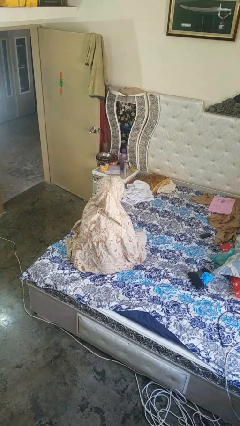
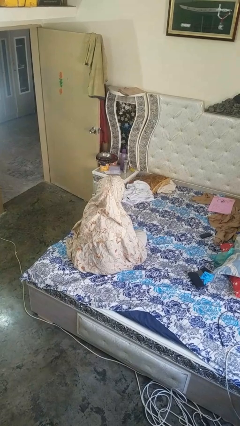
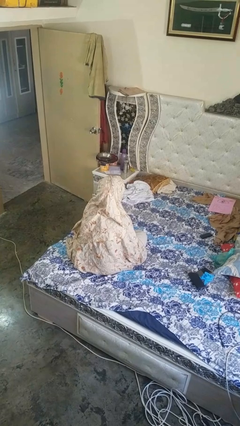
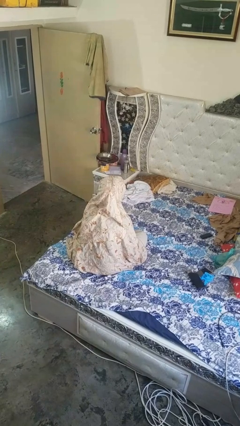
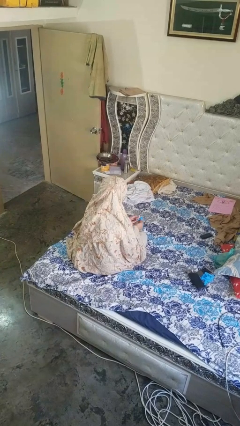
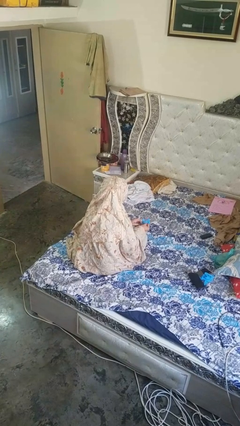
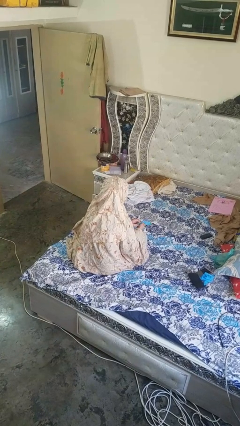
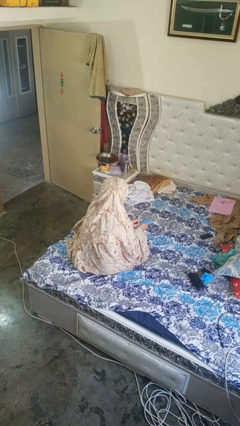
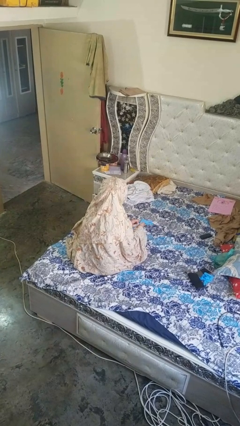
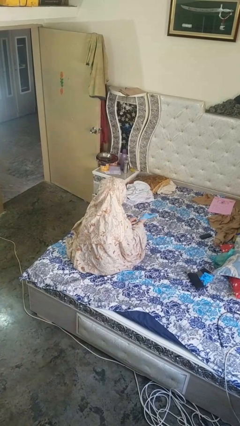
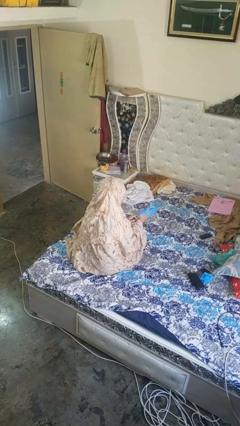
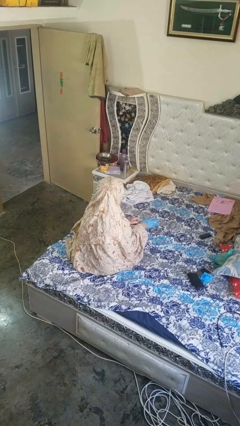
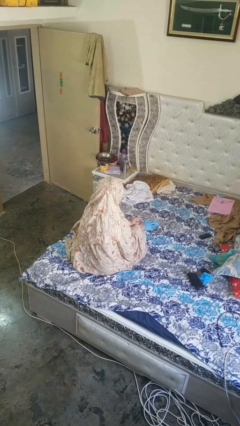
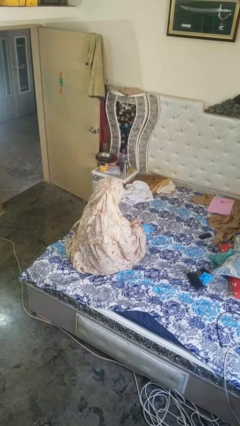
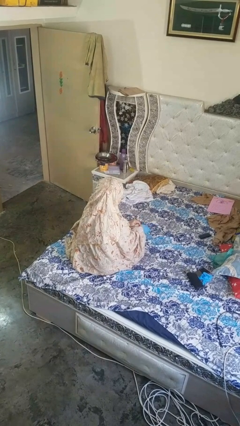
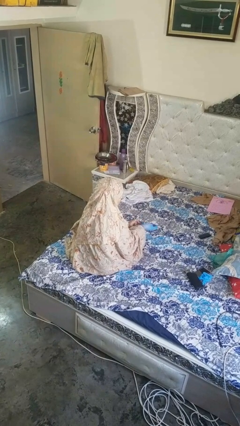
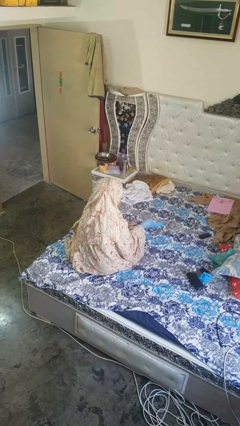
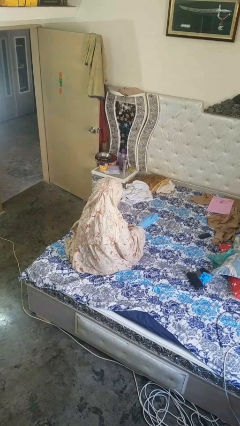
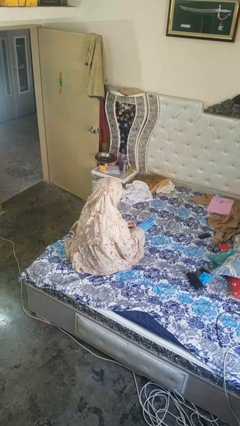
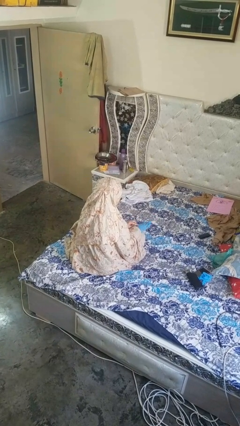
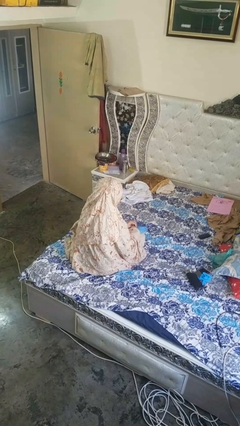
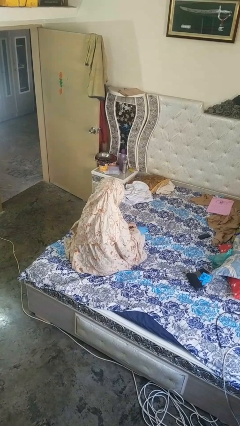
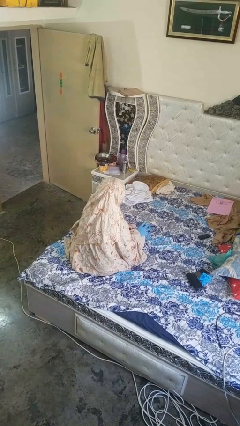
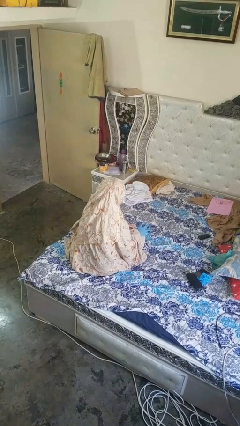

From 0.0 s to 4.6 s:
person puts on gloves

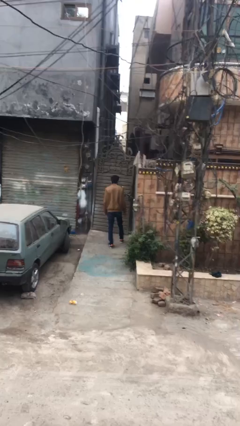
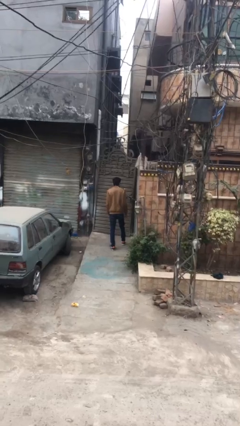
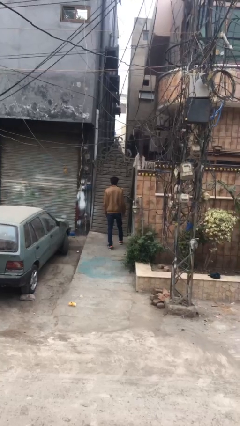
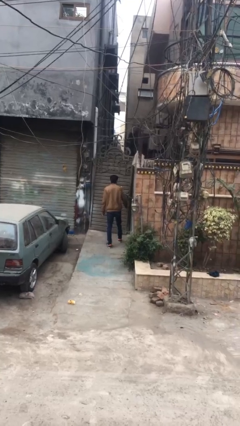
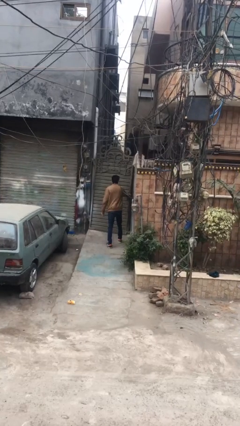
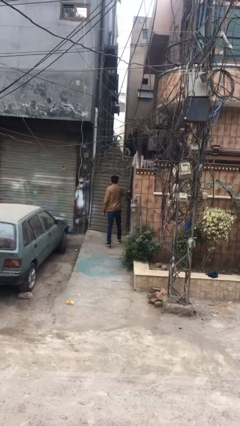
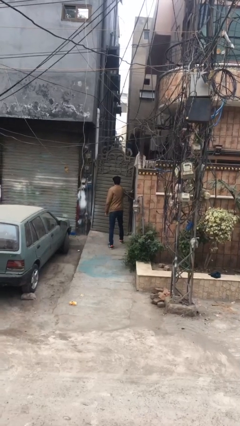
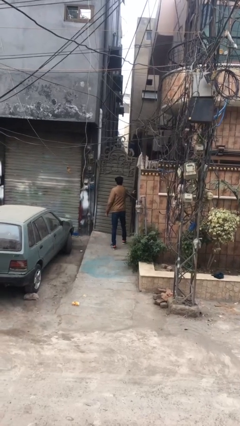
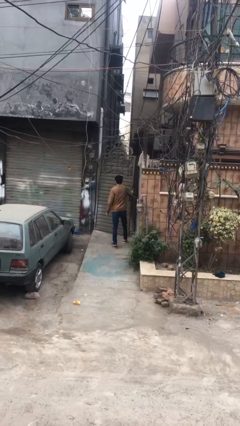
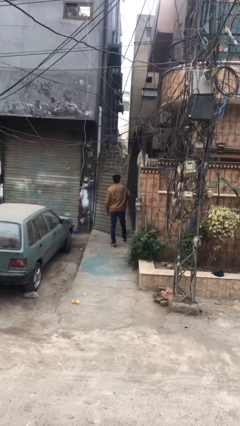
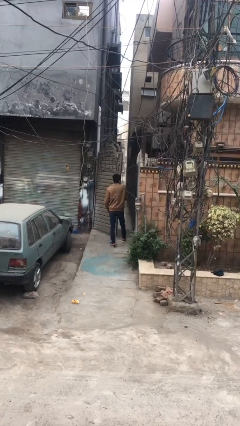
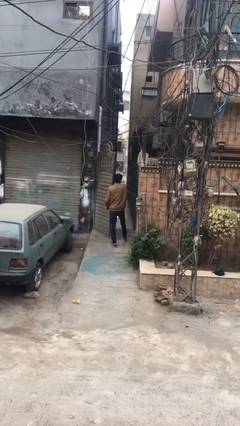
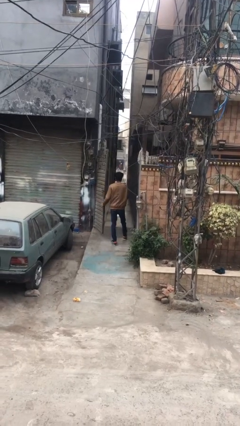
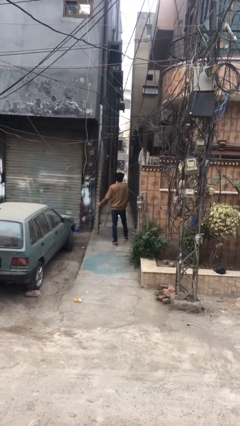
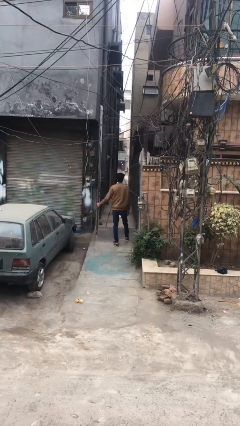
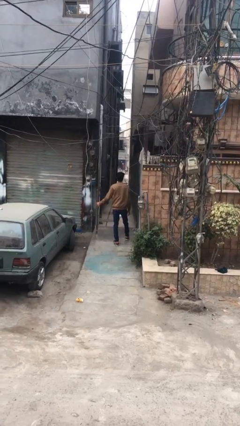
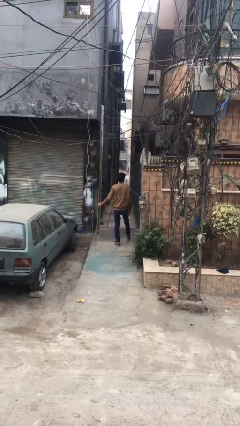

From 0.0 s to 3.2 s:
person opens facility door

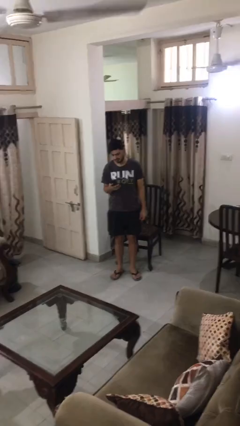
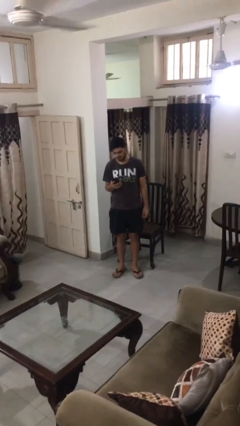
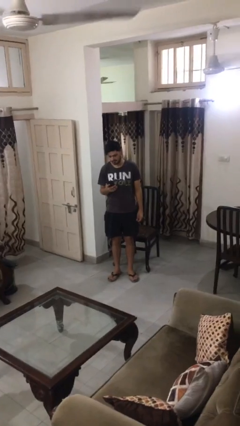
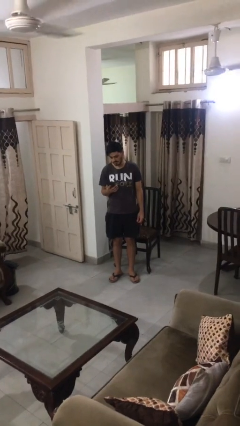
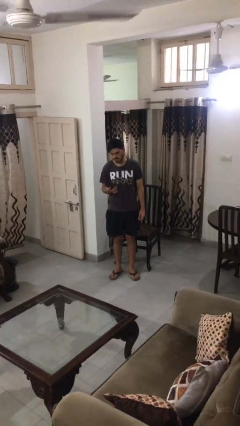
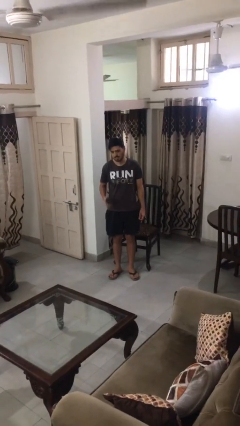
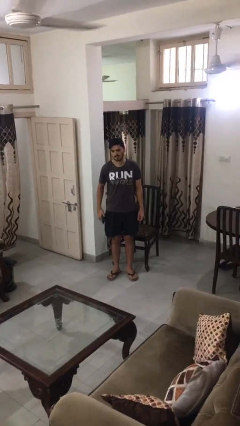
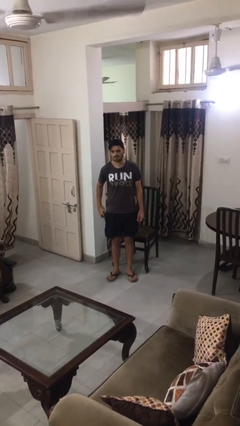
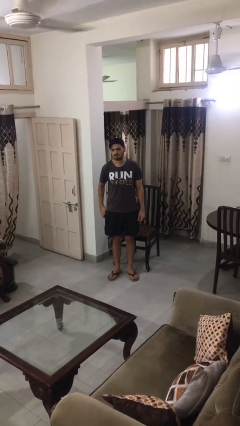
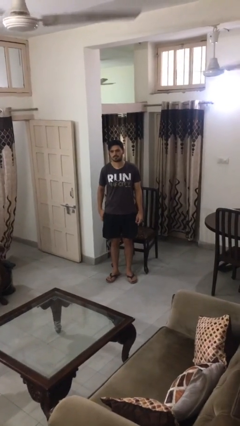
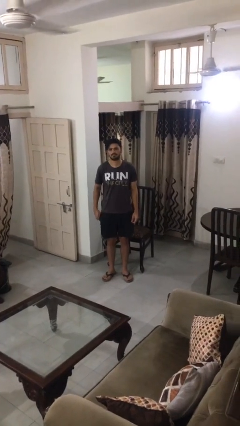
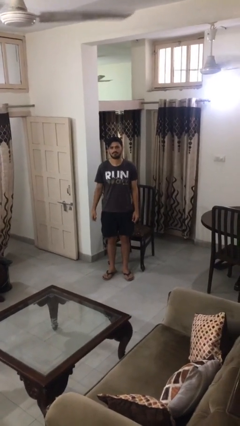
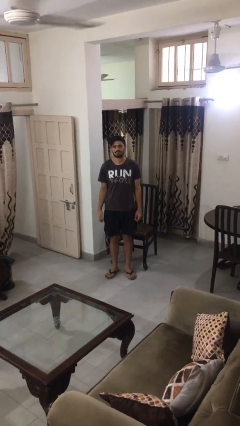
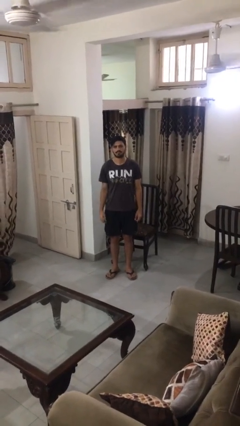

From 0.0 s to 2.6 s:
person puts phone into pocket

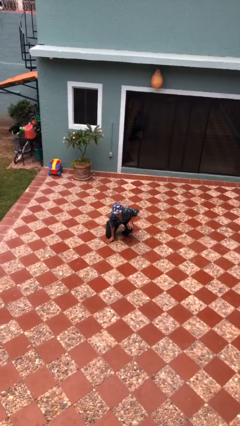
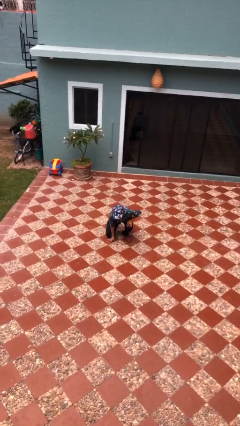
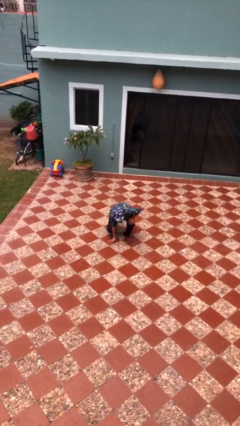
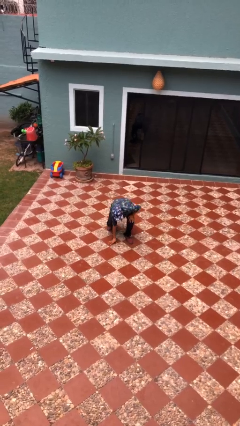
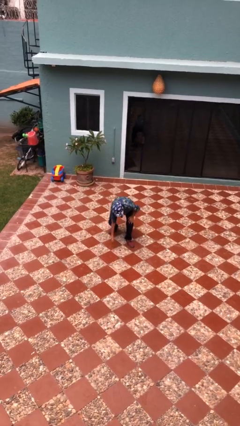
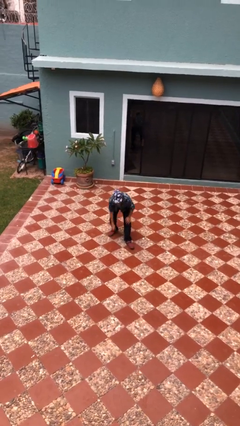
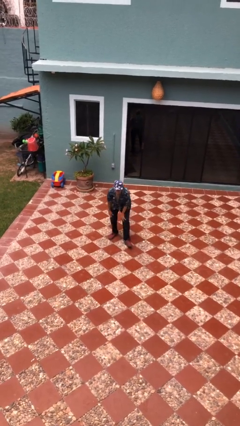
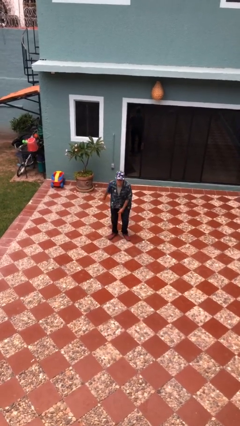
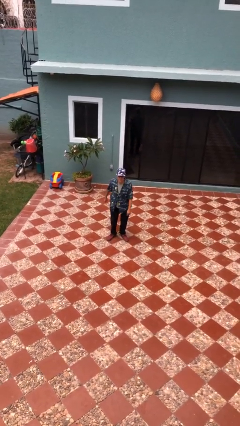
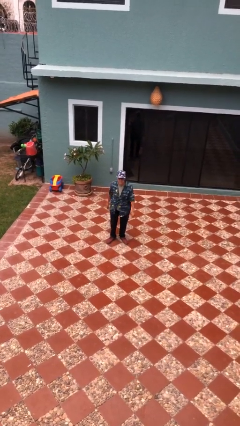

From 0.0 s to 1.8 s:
person stands up from floor

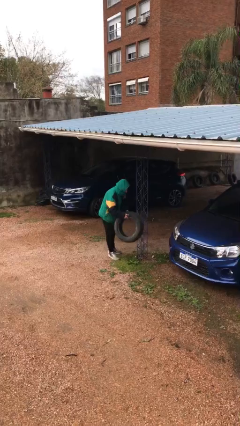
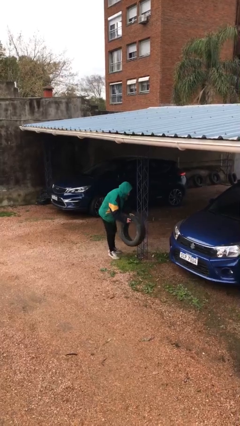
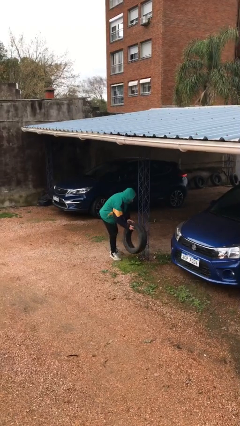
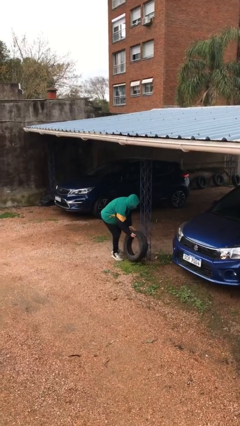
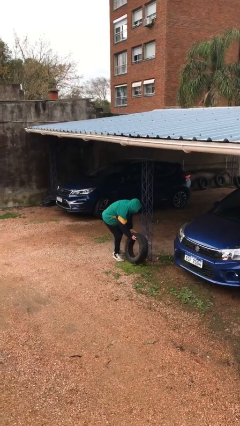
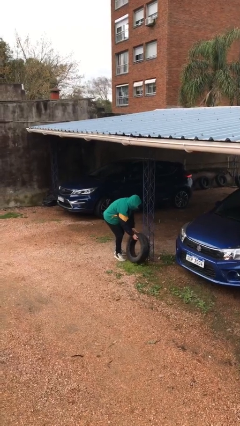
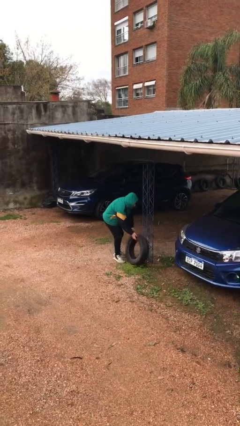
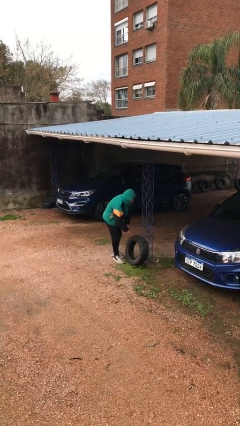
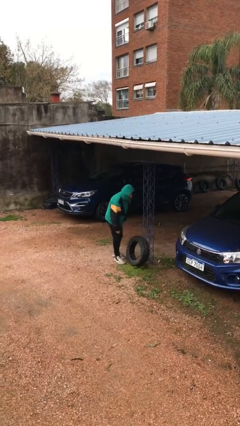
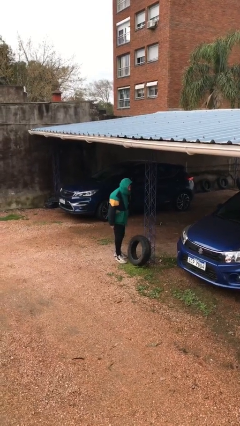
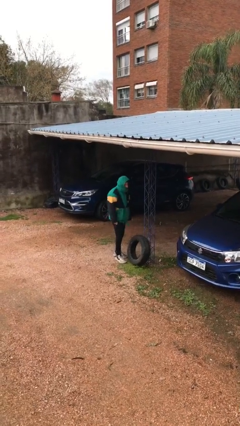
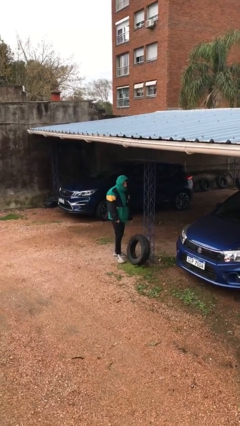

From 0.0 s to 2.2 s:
person puts down object on floor

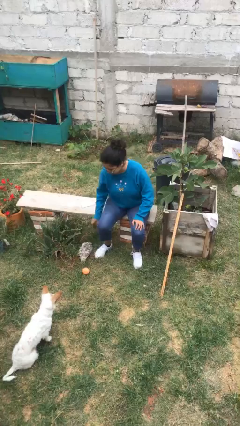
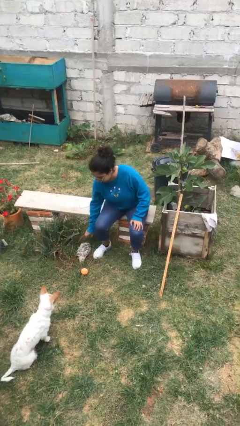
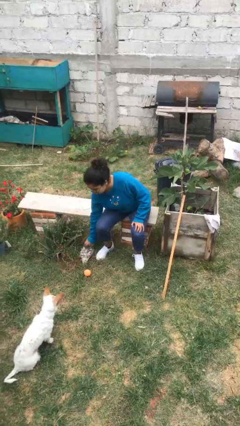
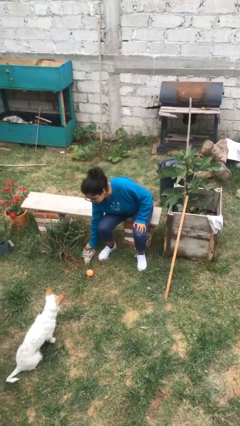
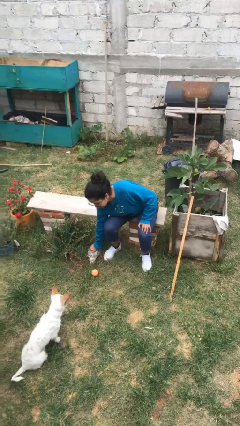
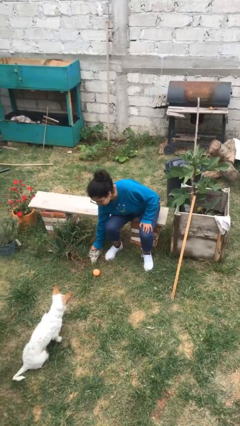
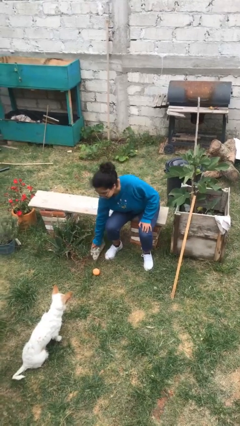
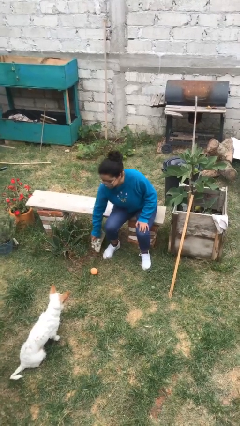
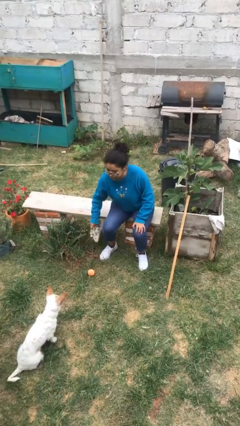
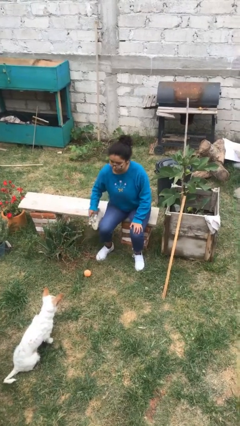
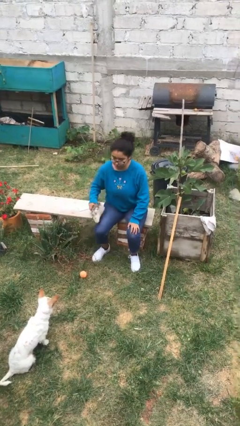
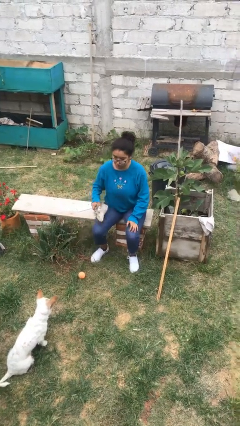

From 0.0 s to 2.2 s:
person picks up object from floor
